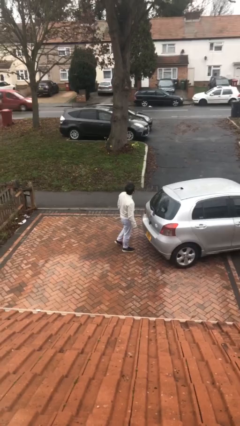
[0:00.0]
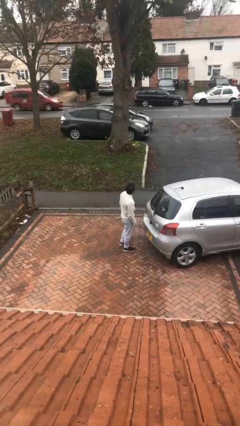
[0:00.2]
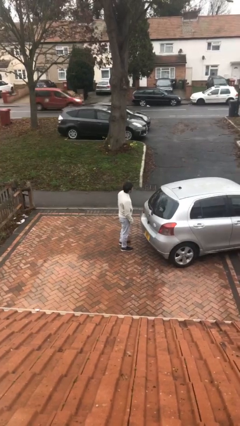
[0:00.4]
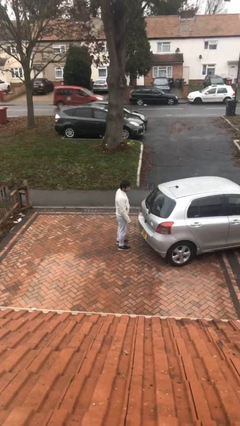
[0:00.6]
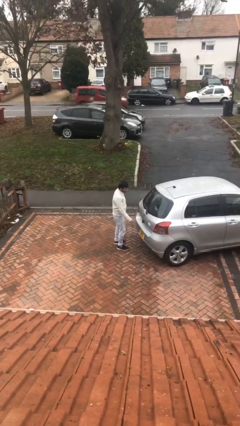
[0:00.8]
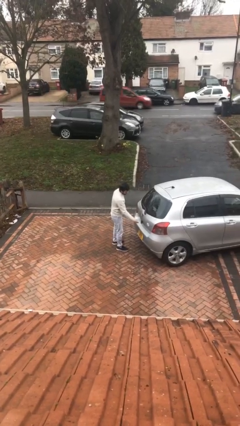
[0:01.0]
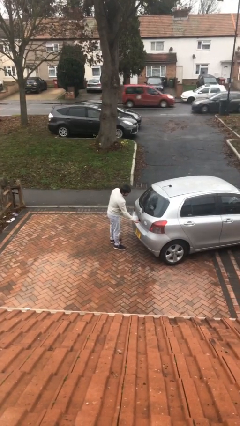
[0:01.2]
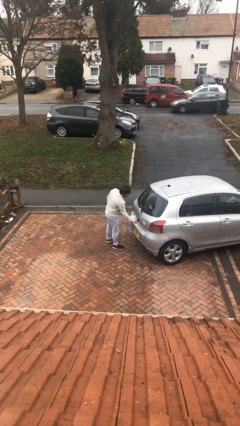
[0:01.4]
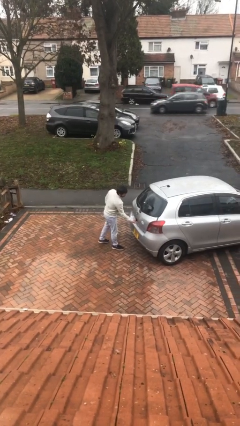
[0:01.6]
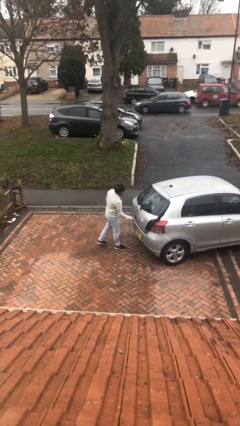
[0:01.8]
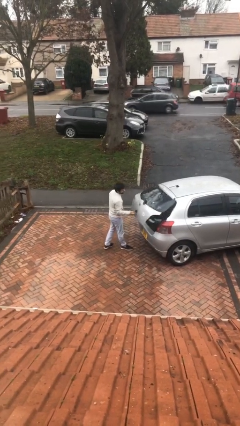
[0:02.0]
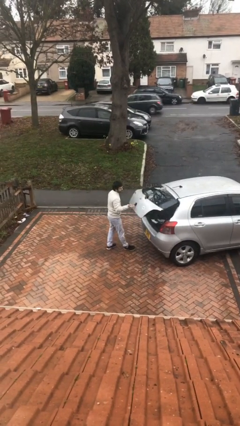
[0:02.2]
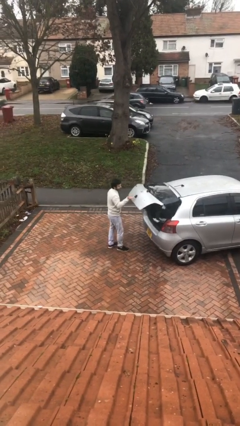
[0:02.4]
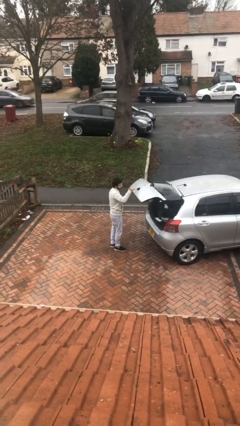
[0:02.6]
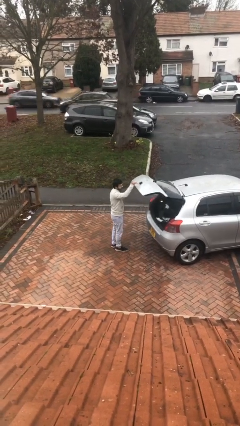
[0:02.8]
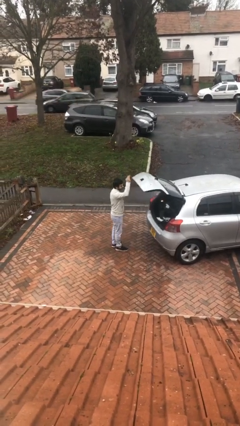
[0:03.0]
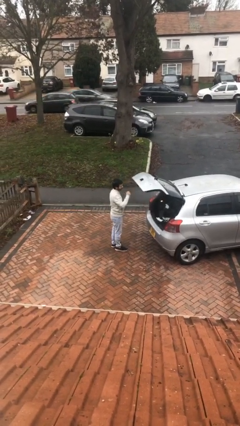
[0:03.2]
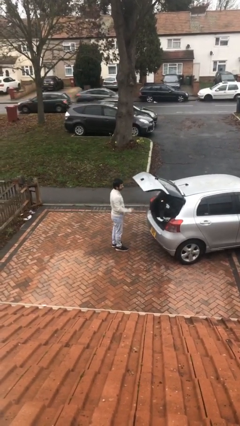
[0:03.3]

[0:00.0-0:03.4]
person opens car trunk

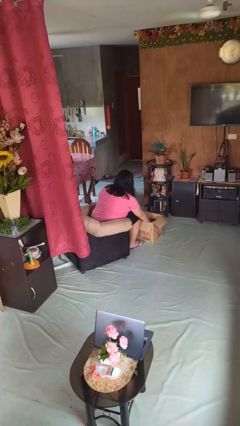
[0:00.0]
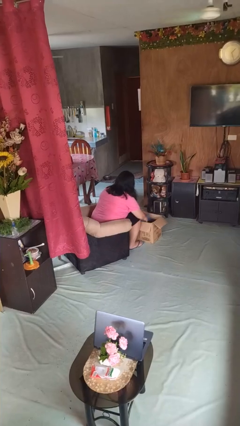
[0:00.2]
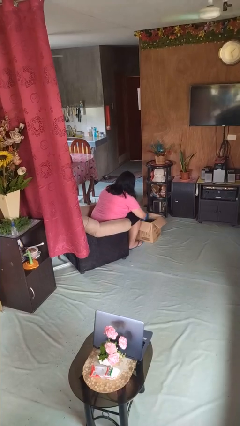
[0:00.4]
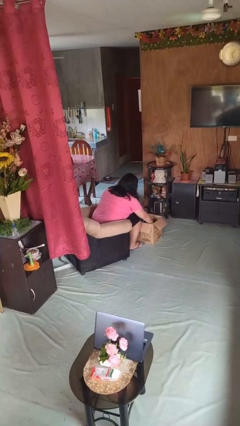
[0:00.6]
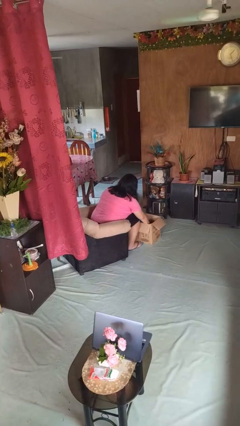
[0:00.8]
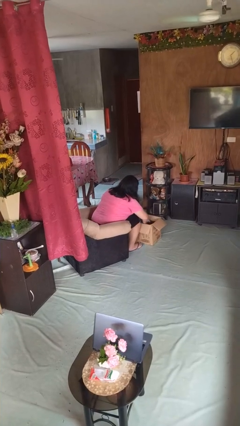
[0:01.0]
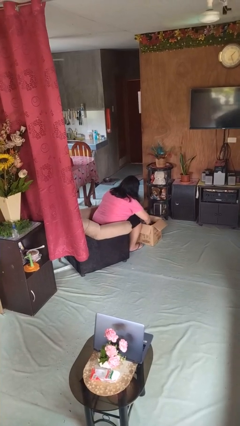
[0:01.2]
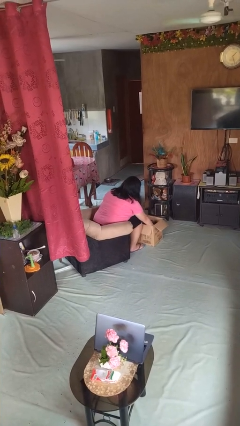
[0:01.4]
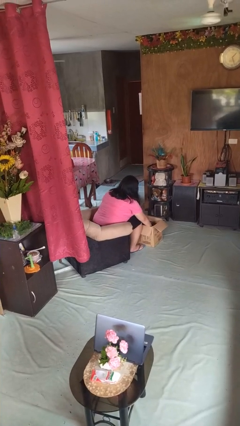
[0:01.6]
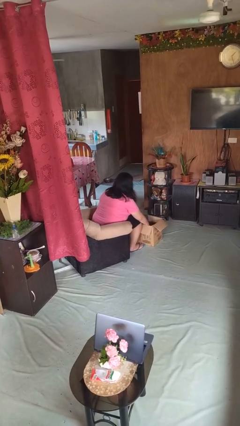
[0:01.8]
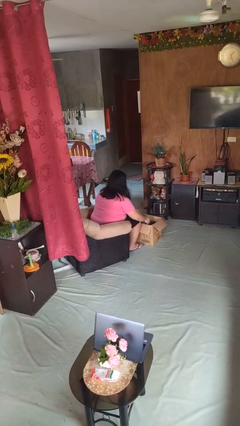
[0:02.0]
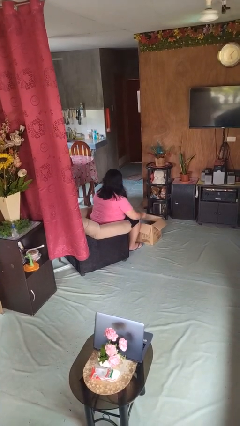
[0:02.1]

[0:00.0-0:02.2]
person searches in box

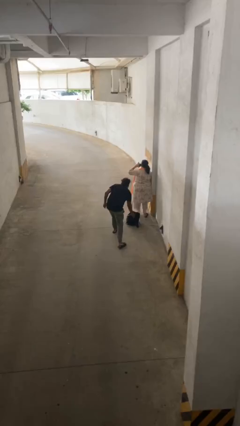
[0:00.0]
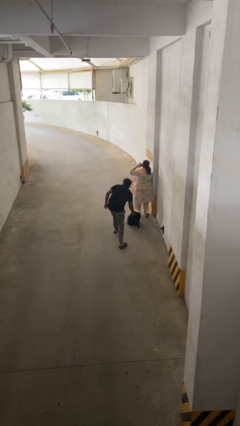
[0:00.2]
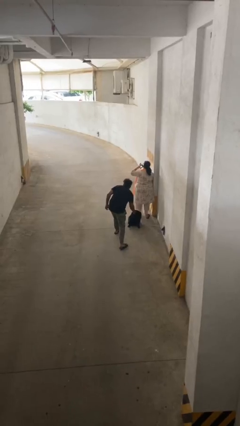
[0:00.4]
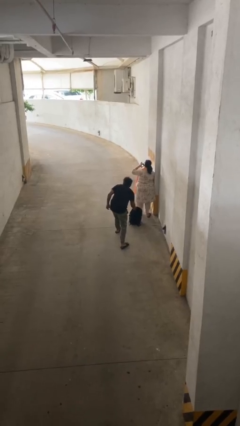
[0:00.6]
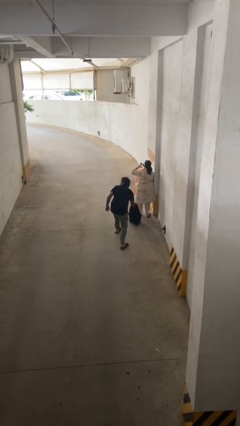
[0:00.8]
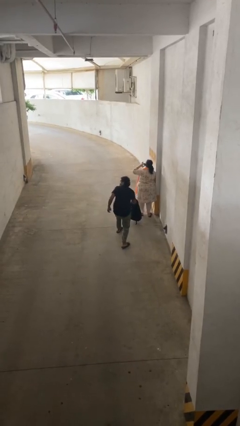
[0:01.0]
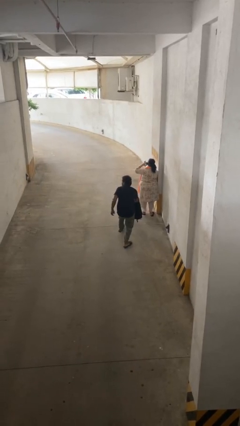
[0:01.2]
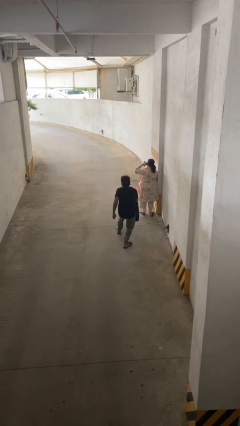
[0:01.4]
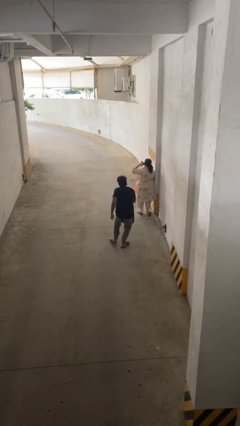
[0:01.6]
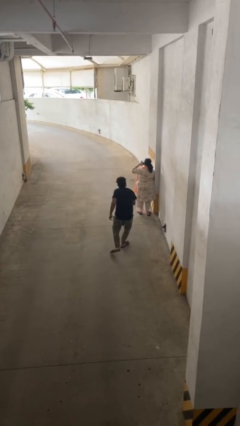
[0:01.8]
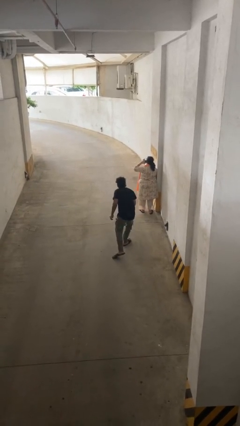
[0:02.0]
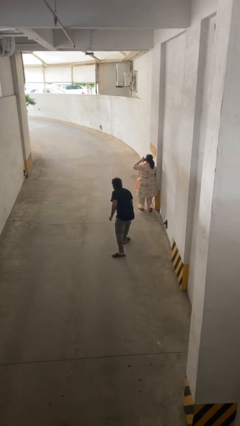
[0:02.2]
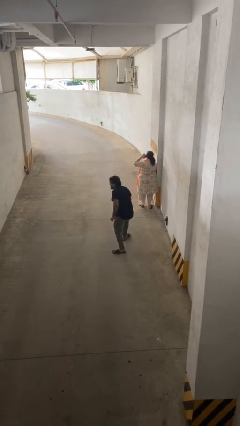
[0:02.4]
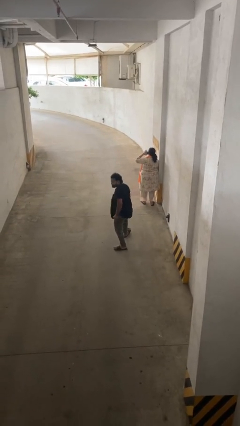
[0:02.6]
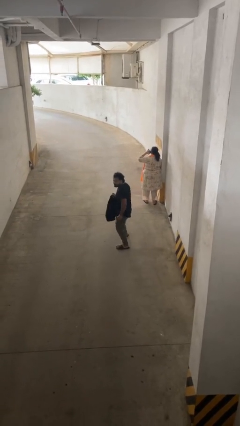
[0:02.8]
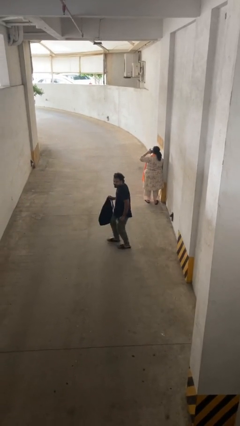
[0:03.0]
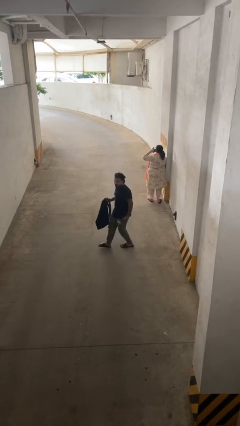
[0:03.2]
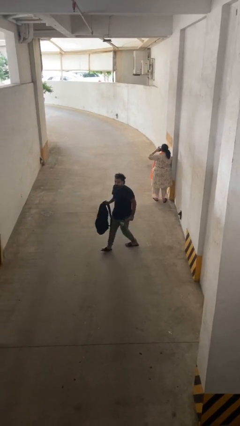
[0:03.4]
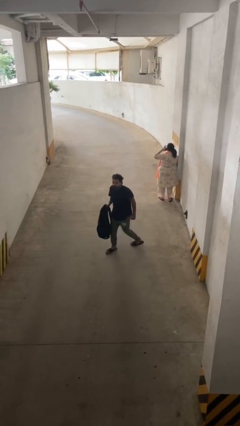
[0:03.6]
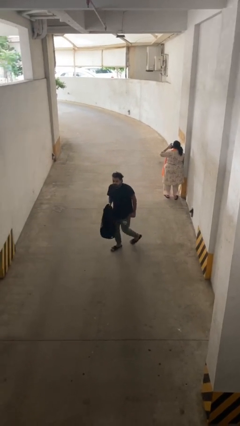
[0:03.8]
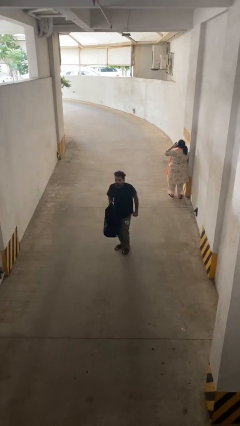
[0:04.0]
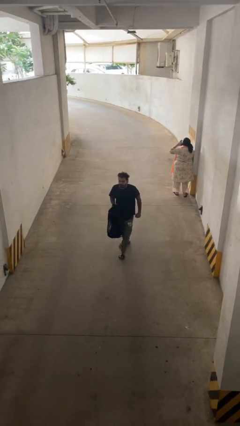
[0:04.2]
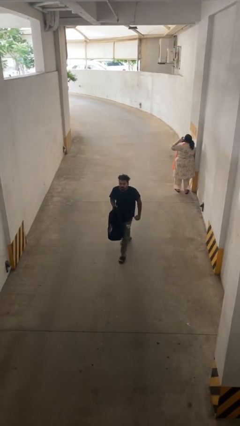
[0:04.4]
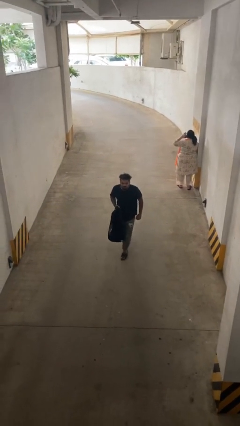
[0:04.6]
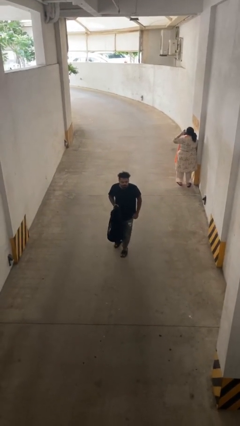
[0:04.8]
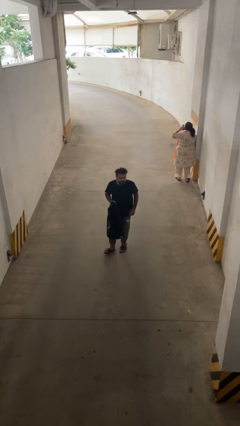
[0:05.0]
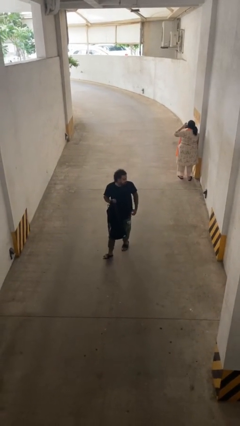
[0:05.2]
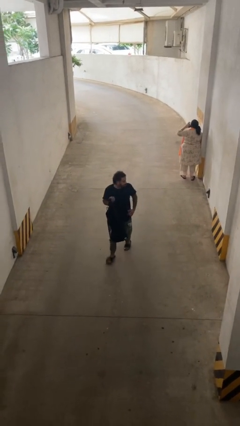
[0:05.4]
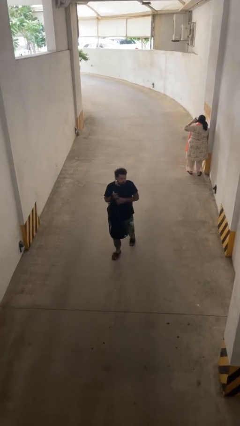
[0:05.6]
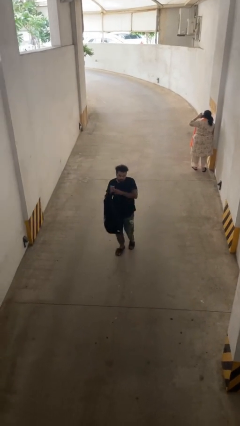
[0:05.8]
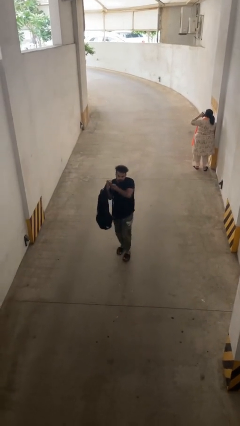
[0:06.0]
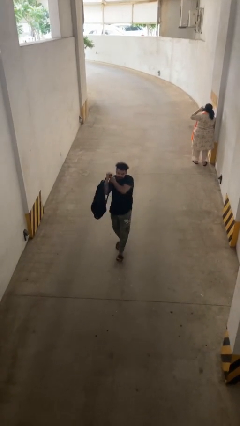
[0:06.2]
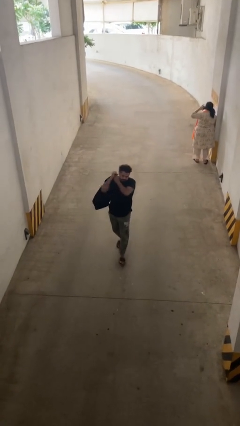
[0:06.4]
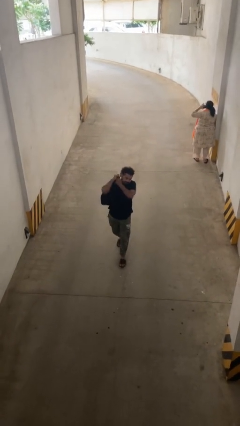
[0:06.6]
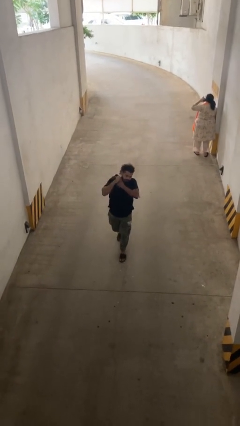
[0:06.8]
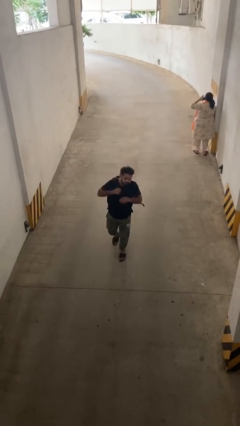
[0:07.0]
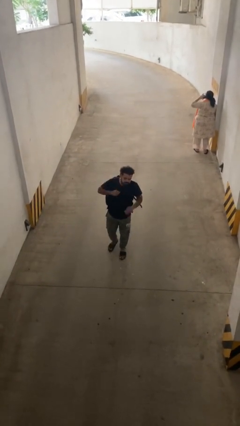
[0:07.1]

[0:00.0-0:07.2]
person steals object from person

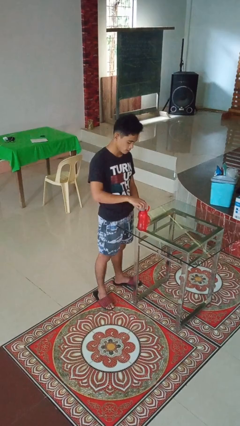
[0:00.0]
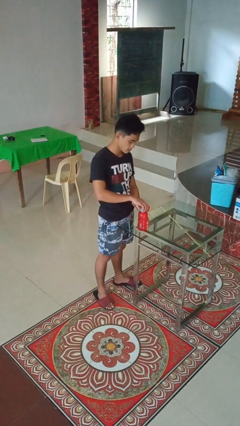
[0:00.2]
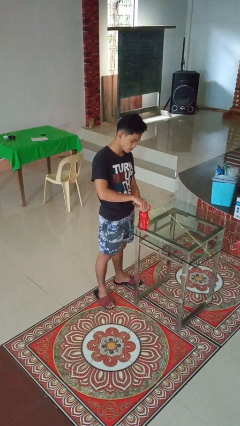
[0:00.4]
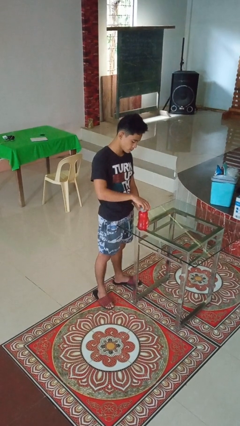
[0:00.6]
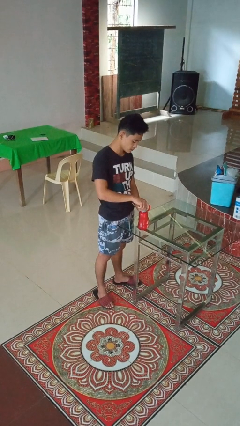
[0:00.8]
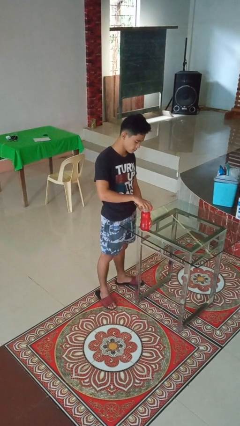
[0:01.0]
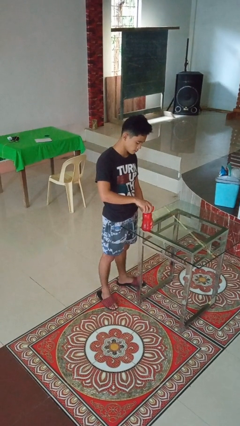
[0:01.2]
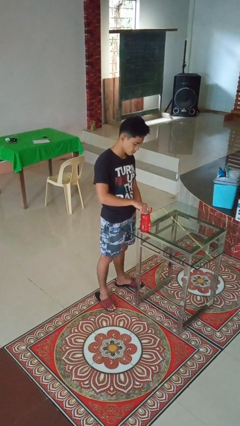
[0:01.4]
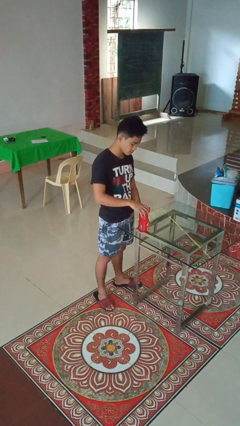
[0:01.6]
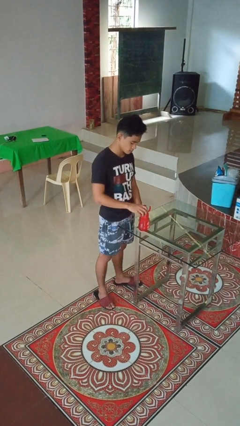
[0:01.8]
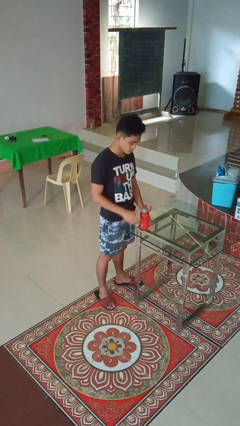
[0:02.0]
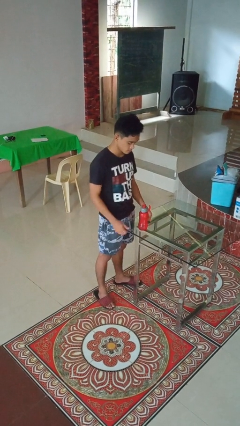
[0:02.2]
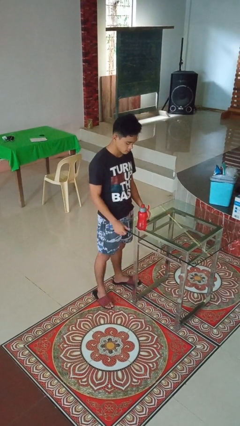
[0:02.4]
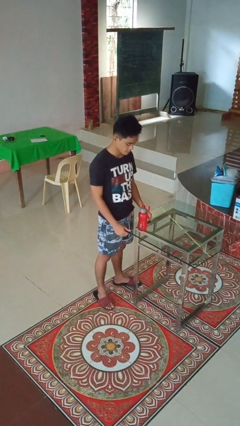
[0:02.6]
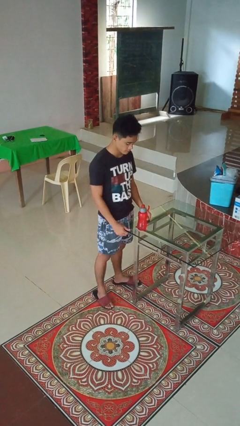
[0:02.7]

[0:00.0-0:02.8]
person screws lid to bottle

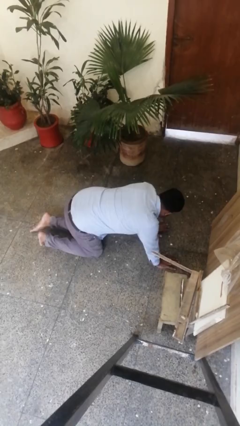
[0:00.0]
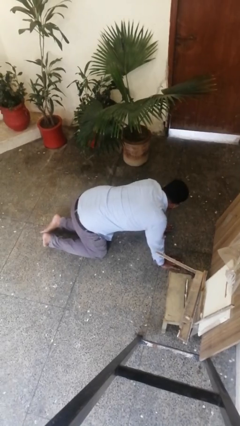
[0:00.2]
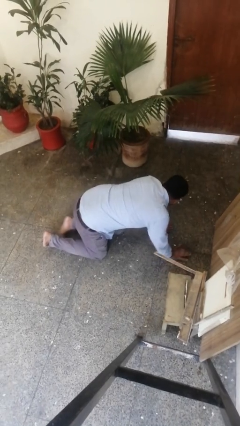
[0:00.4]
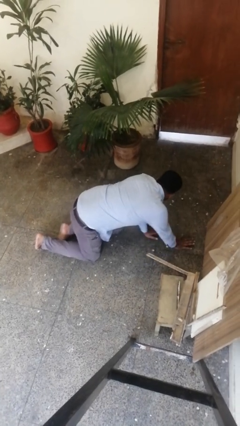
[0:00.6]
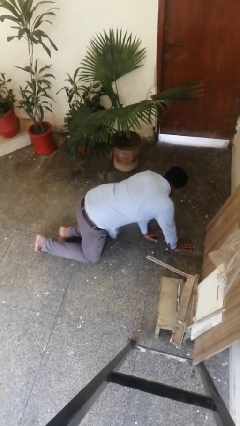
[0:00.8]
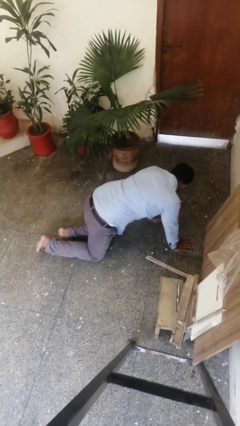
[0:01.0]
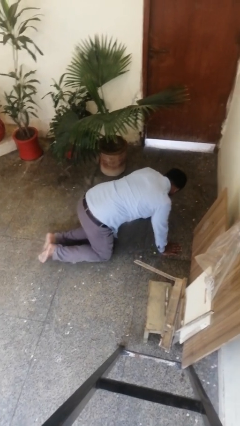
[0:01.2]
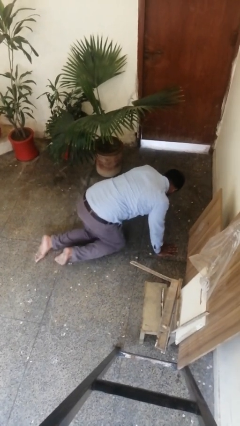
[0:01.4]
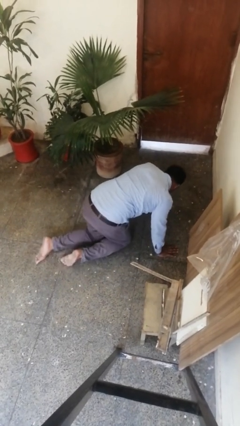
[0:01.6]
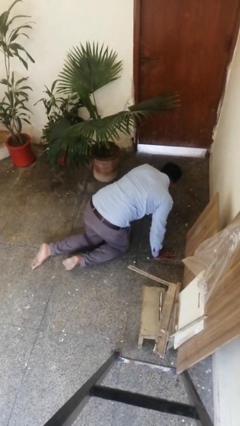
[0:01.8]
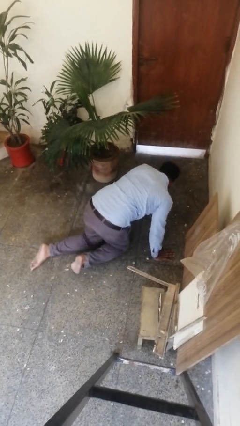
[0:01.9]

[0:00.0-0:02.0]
person crawls
